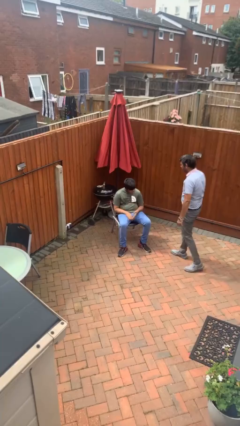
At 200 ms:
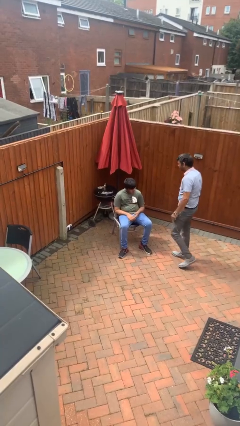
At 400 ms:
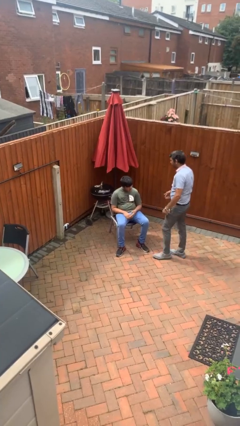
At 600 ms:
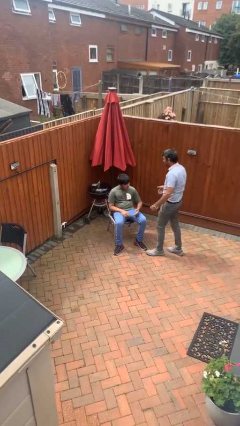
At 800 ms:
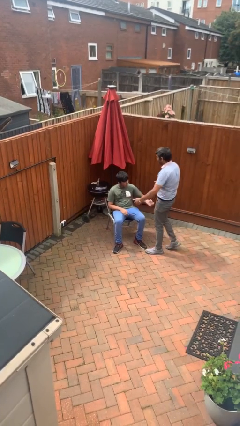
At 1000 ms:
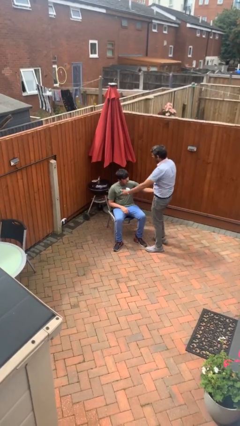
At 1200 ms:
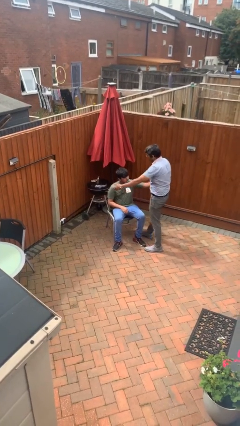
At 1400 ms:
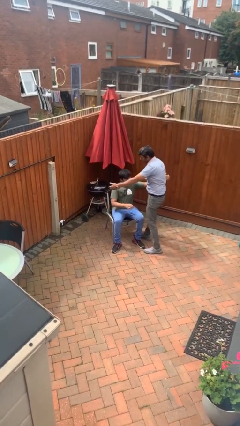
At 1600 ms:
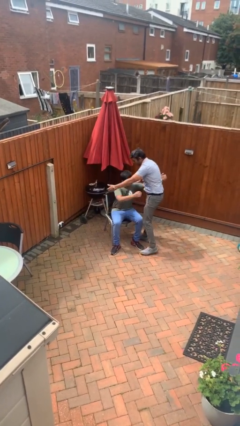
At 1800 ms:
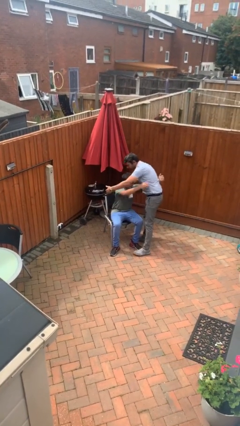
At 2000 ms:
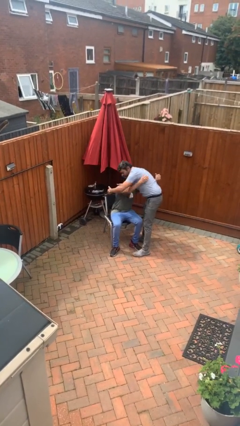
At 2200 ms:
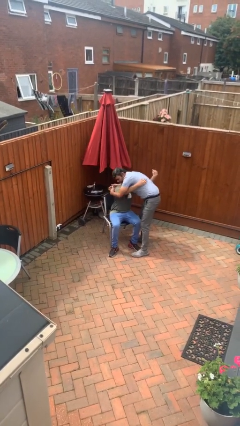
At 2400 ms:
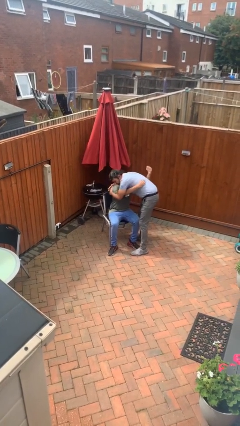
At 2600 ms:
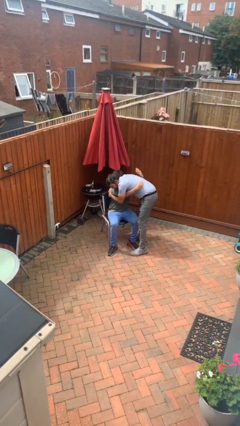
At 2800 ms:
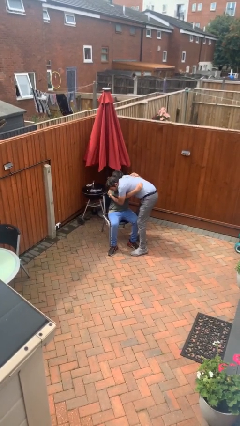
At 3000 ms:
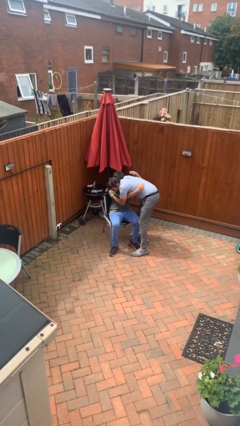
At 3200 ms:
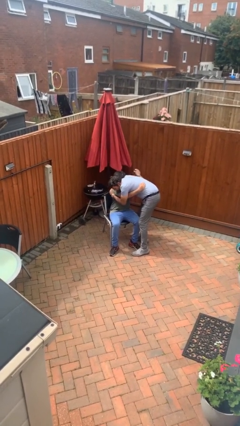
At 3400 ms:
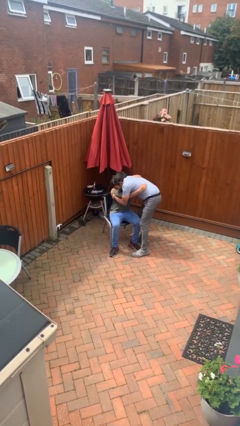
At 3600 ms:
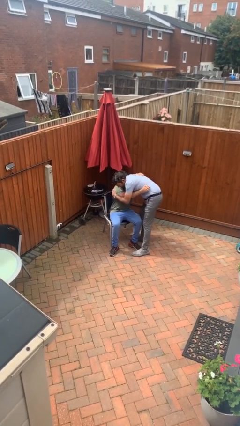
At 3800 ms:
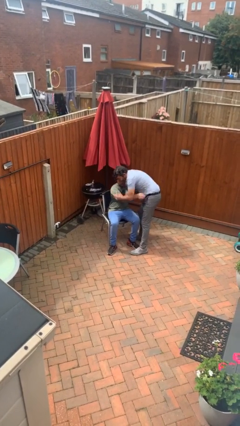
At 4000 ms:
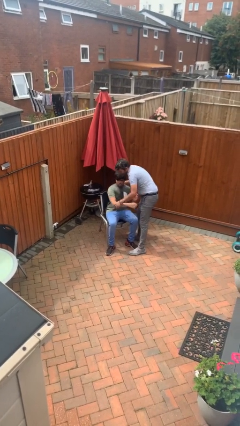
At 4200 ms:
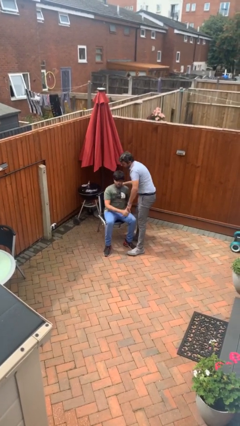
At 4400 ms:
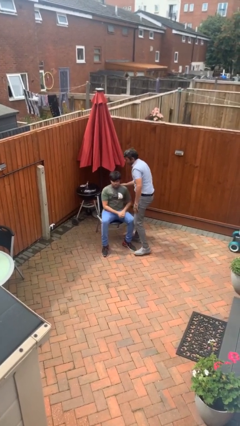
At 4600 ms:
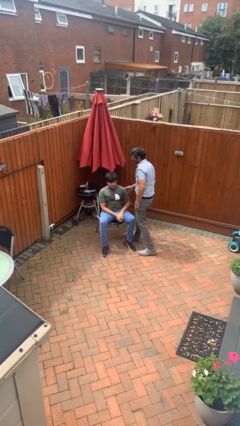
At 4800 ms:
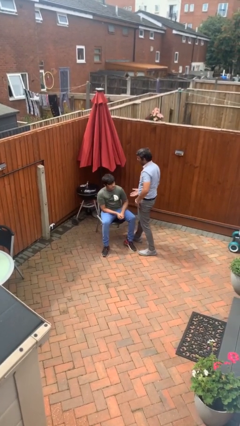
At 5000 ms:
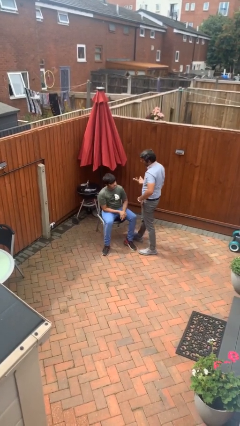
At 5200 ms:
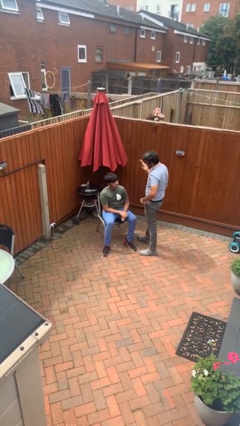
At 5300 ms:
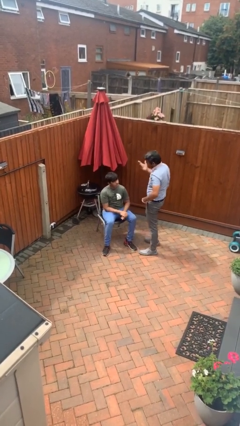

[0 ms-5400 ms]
person embraces person

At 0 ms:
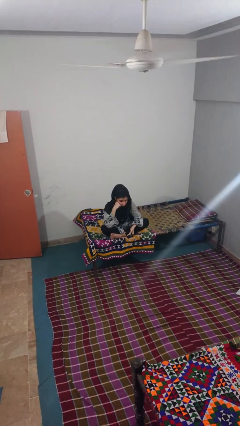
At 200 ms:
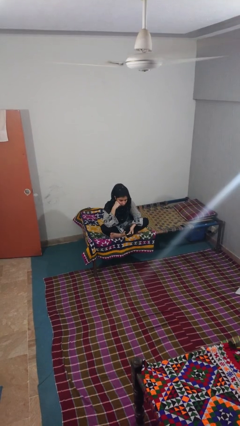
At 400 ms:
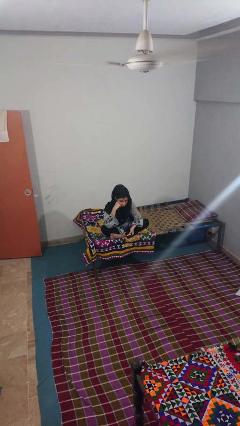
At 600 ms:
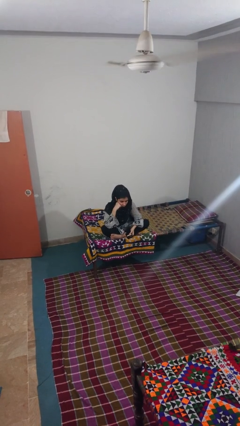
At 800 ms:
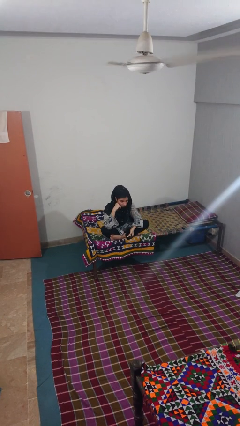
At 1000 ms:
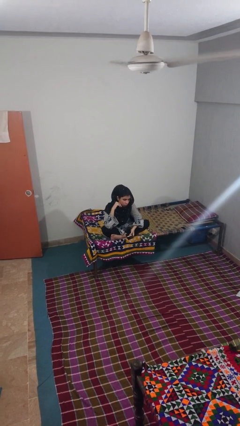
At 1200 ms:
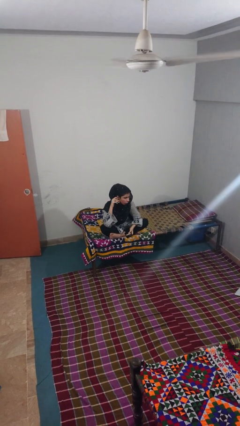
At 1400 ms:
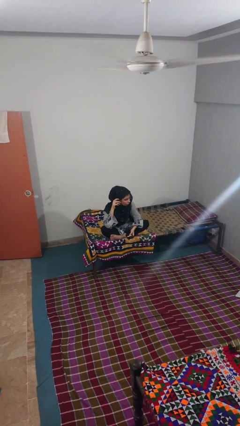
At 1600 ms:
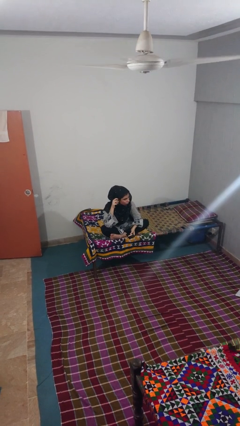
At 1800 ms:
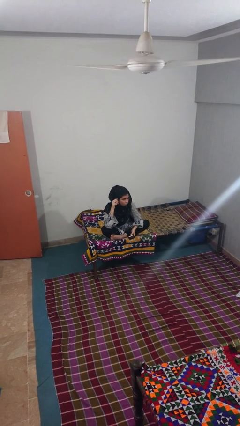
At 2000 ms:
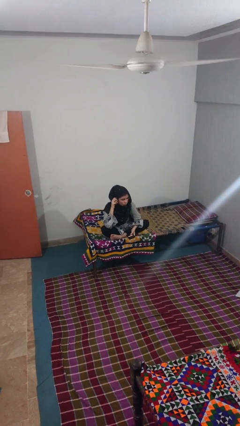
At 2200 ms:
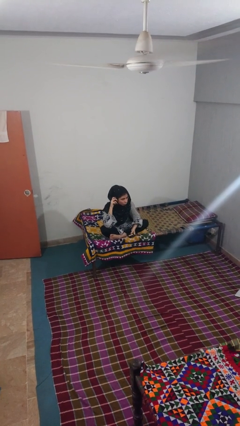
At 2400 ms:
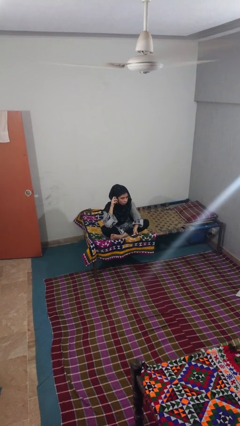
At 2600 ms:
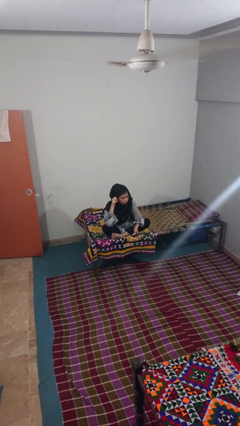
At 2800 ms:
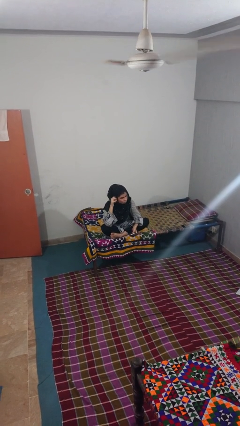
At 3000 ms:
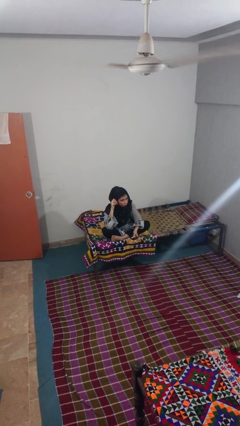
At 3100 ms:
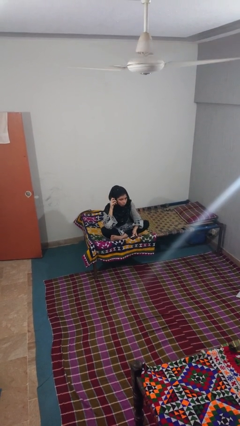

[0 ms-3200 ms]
person touches earlobe

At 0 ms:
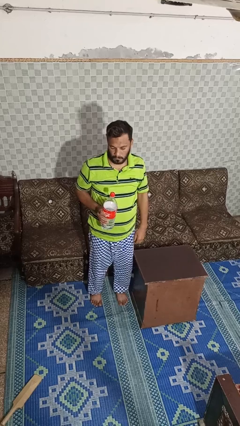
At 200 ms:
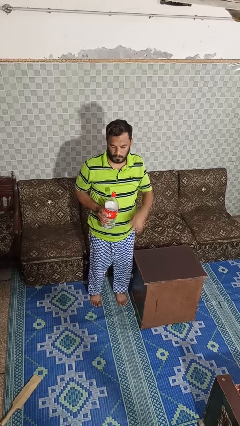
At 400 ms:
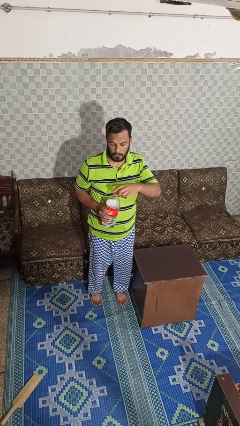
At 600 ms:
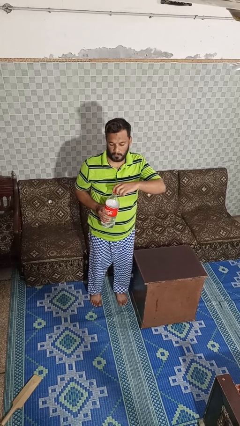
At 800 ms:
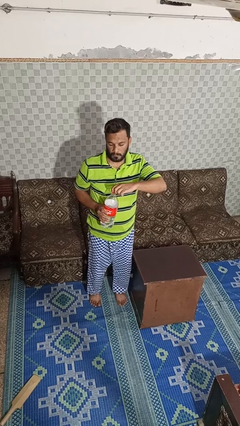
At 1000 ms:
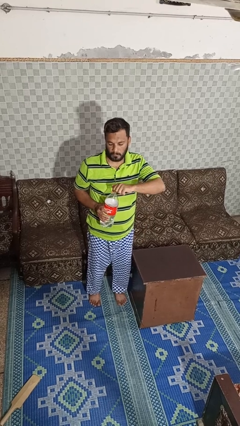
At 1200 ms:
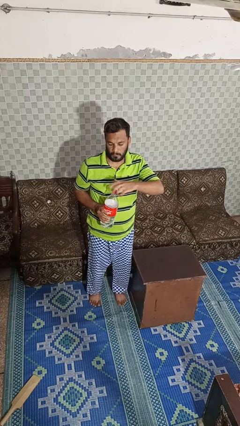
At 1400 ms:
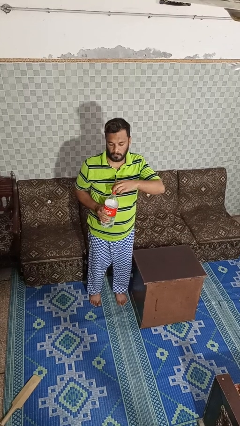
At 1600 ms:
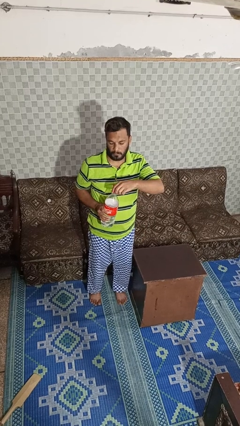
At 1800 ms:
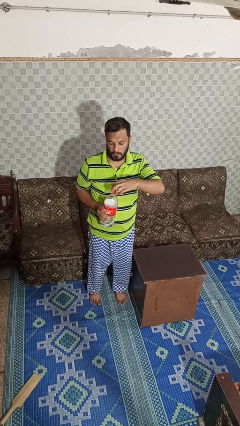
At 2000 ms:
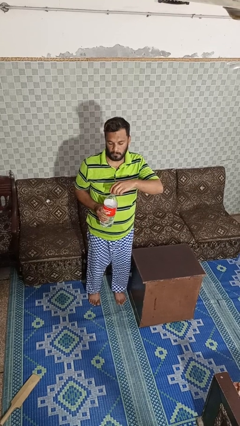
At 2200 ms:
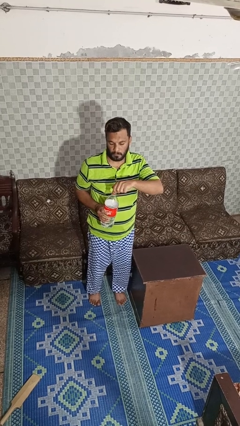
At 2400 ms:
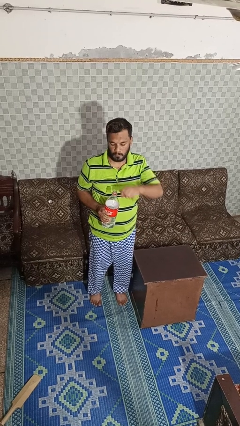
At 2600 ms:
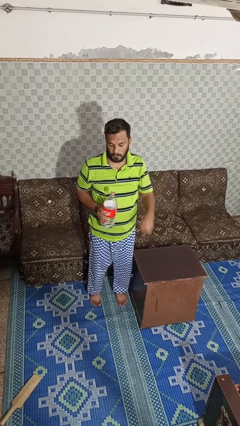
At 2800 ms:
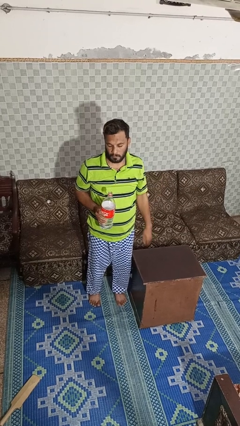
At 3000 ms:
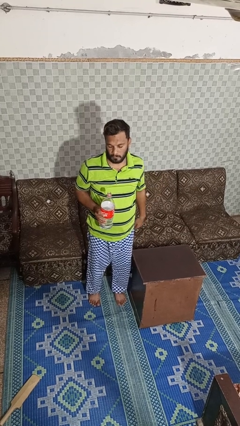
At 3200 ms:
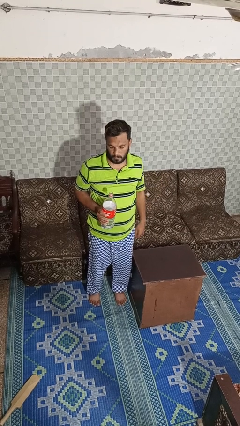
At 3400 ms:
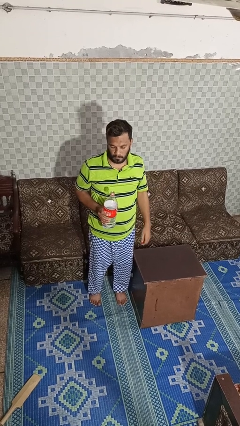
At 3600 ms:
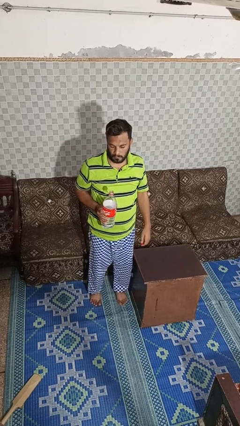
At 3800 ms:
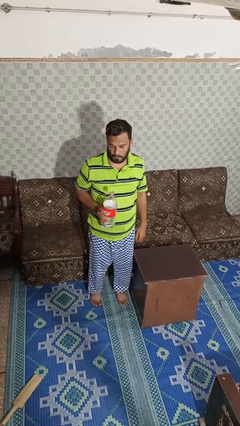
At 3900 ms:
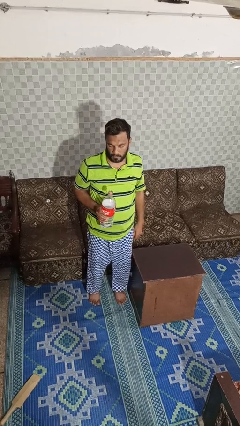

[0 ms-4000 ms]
person unscrews lid from bottle

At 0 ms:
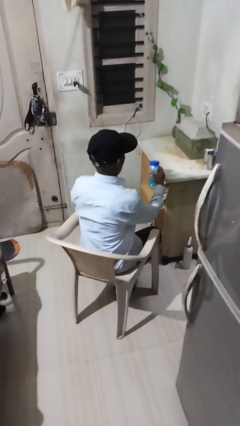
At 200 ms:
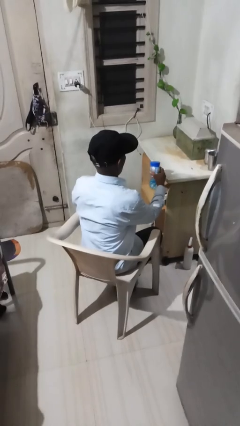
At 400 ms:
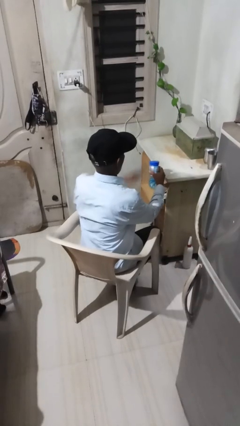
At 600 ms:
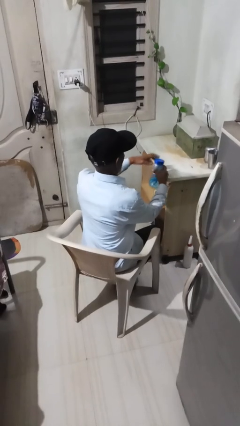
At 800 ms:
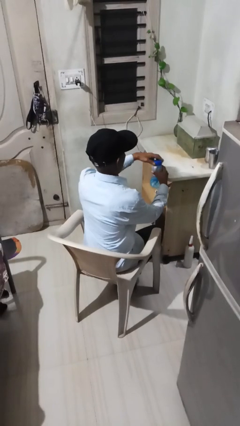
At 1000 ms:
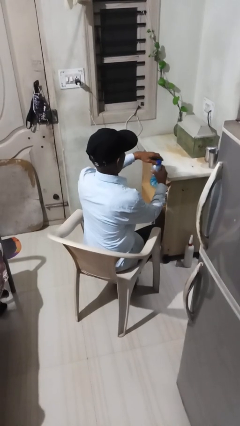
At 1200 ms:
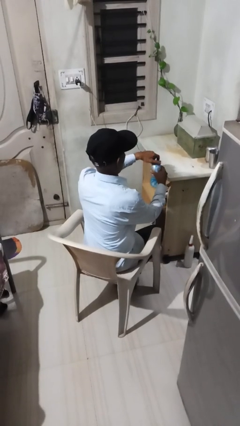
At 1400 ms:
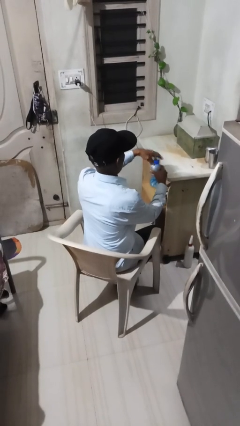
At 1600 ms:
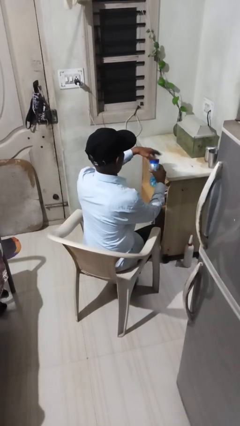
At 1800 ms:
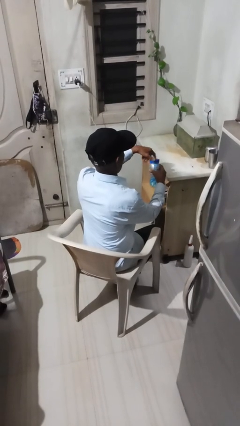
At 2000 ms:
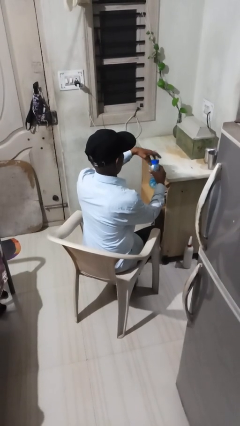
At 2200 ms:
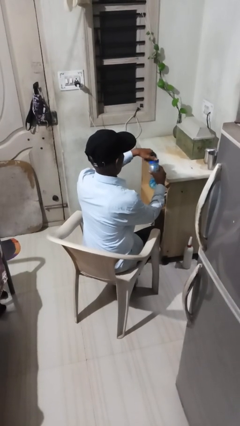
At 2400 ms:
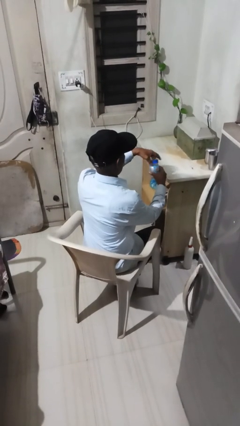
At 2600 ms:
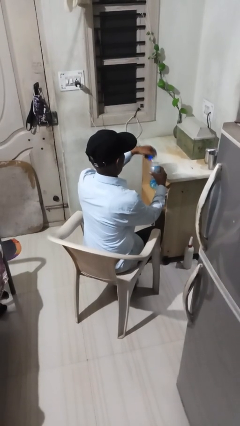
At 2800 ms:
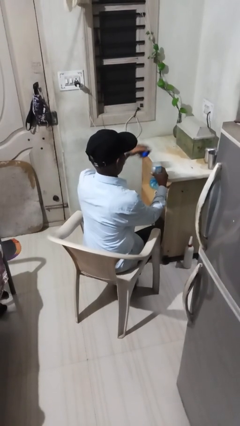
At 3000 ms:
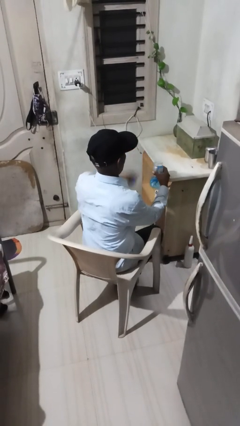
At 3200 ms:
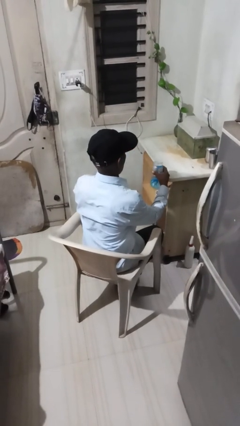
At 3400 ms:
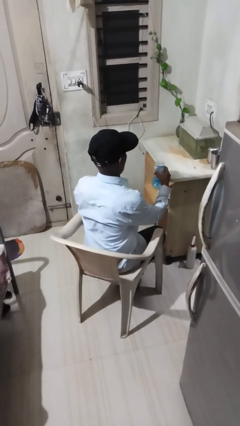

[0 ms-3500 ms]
person opens jar

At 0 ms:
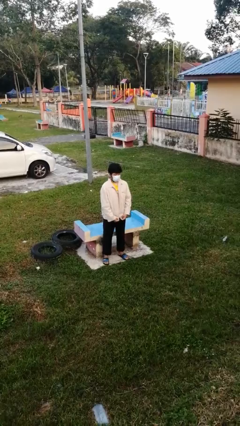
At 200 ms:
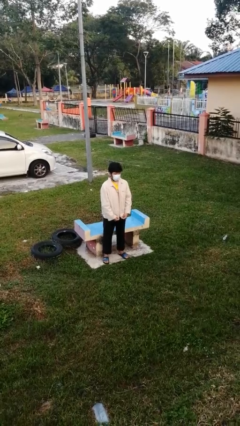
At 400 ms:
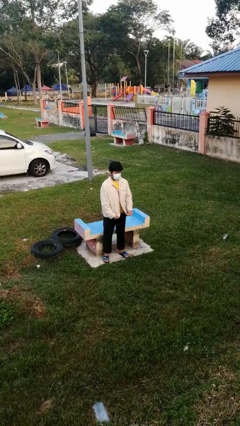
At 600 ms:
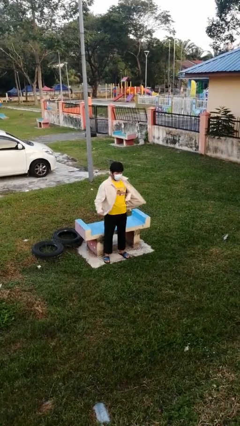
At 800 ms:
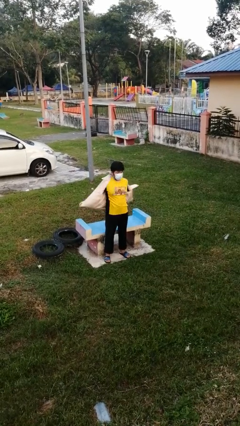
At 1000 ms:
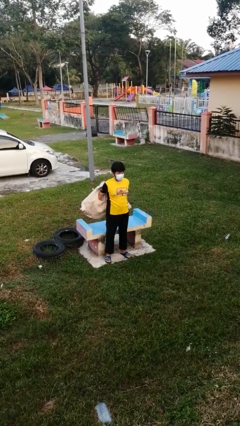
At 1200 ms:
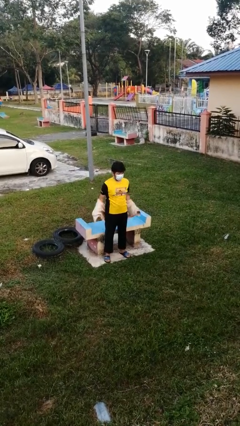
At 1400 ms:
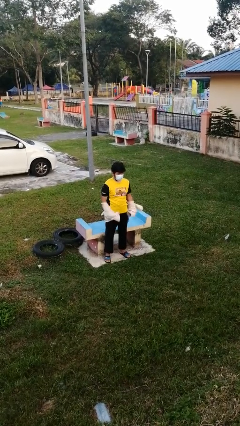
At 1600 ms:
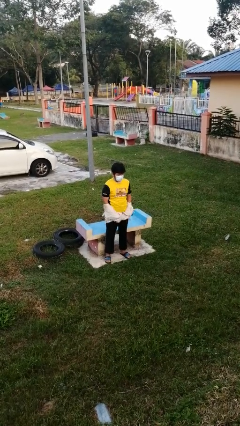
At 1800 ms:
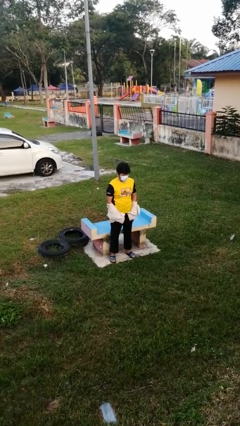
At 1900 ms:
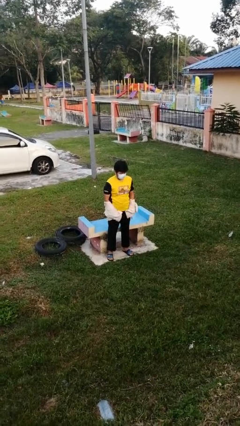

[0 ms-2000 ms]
person takes off jacket
